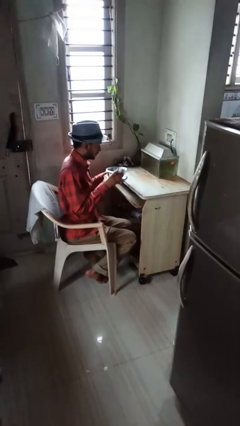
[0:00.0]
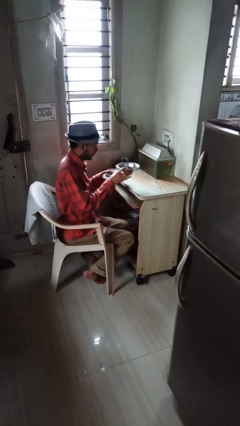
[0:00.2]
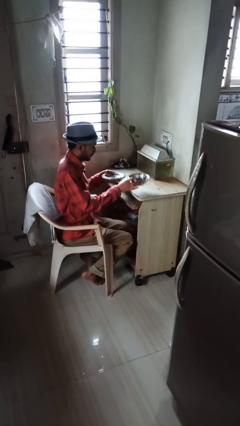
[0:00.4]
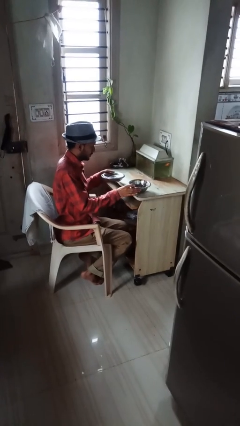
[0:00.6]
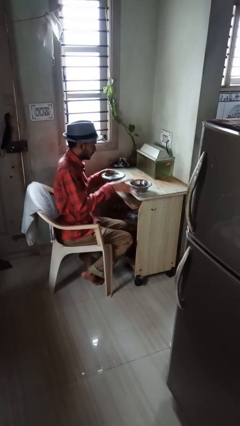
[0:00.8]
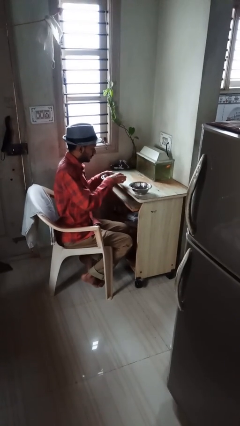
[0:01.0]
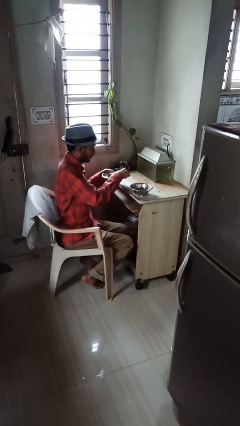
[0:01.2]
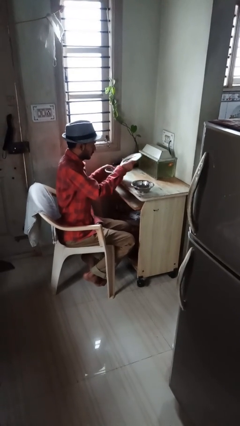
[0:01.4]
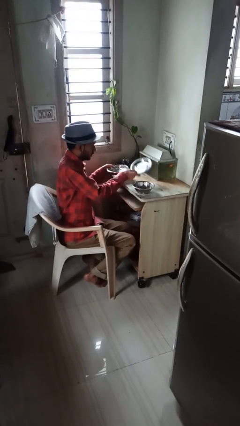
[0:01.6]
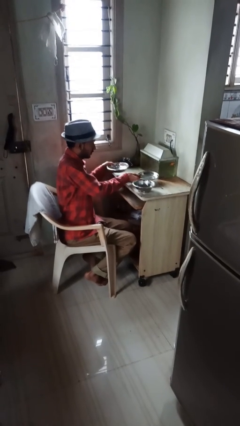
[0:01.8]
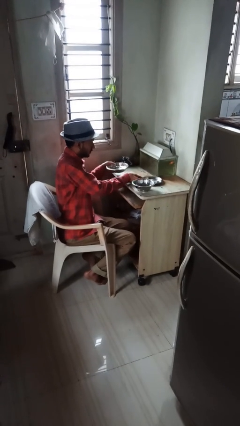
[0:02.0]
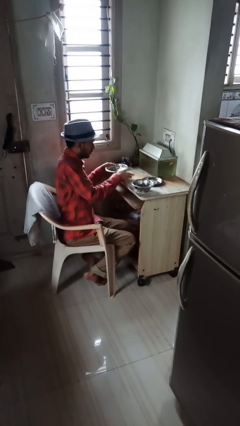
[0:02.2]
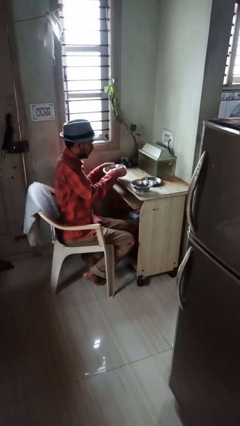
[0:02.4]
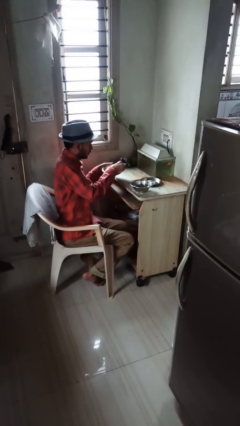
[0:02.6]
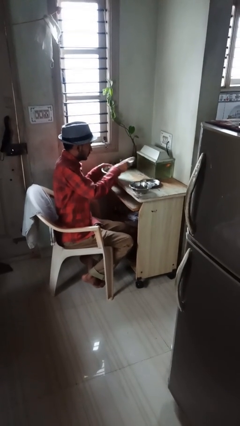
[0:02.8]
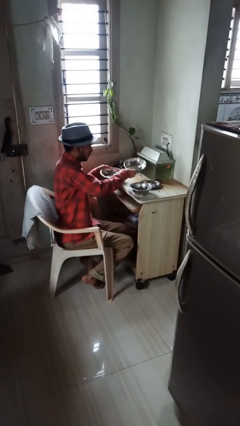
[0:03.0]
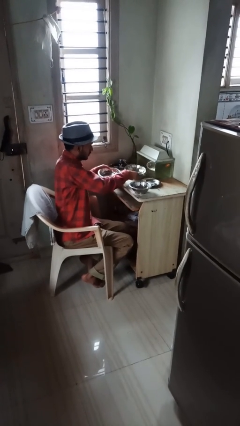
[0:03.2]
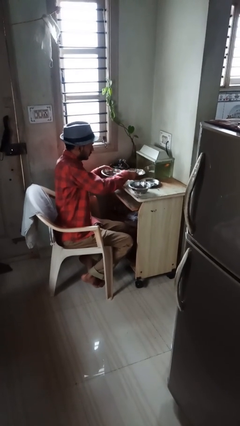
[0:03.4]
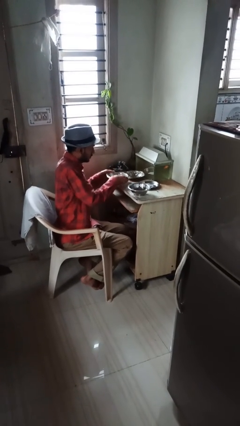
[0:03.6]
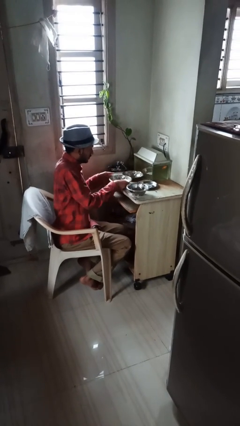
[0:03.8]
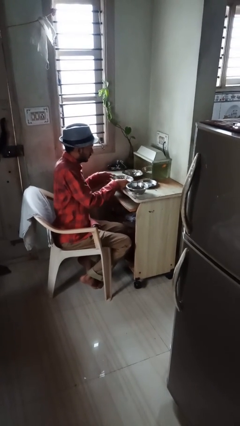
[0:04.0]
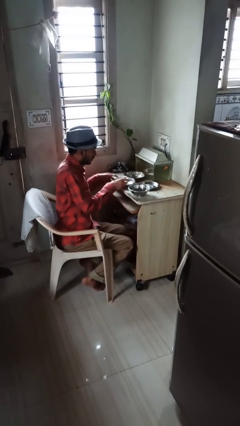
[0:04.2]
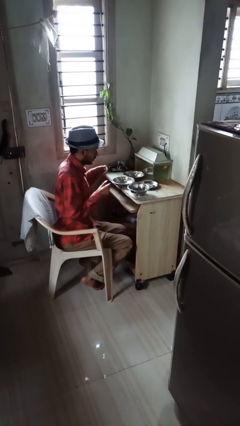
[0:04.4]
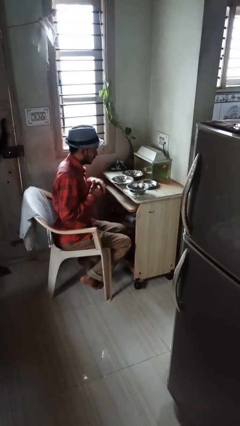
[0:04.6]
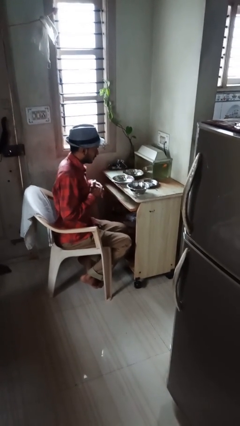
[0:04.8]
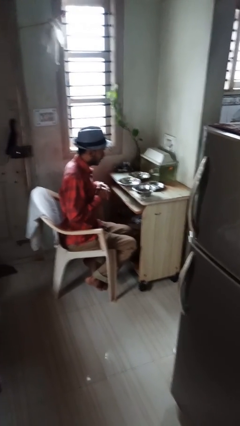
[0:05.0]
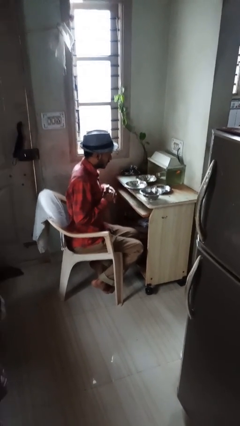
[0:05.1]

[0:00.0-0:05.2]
person sets table

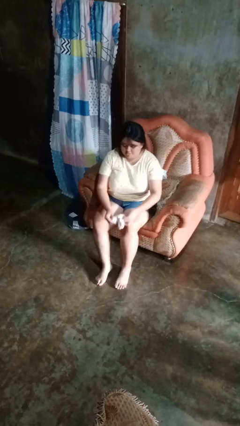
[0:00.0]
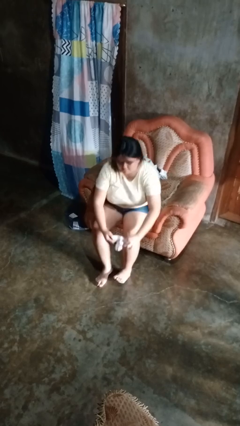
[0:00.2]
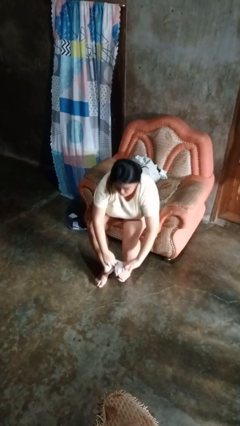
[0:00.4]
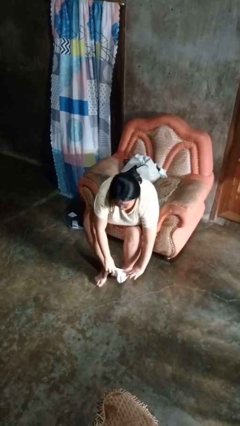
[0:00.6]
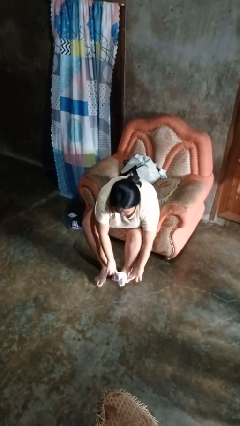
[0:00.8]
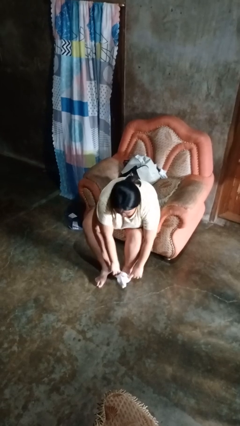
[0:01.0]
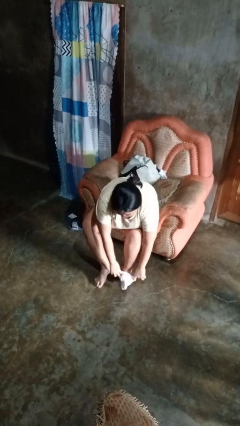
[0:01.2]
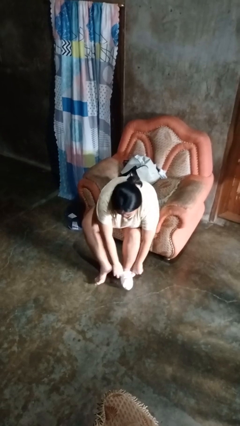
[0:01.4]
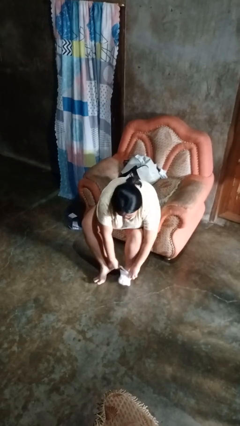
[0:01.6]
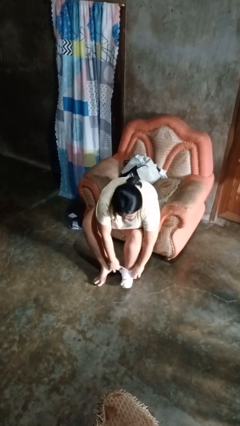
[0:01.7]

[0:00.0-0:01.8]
person puts on socks

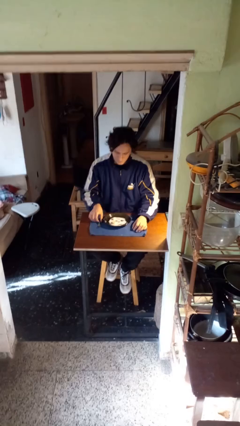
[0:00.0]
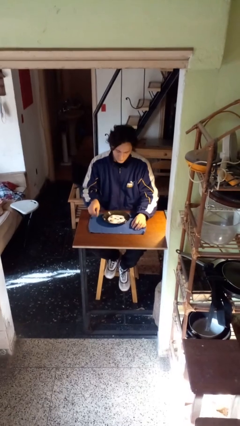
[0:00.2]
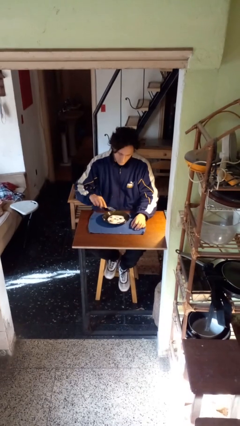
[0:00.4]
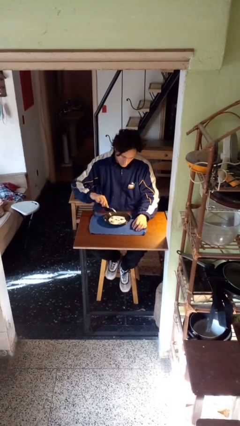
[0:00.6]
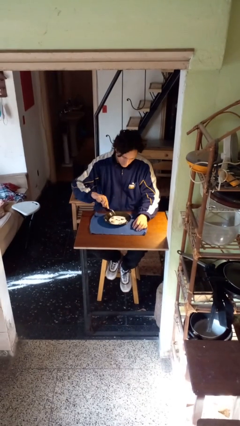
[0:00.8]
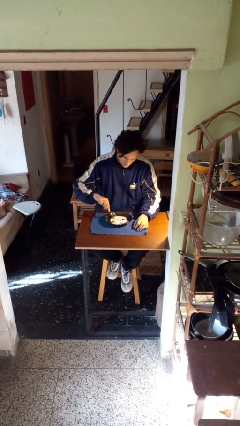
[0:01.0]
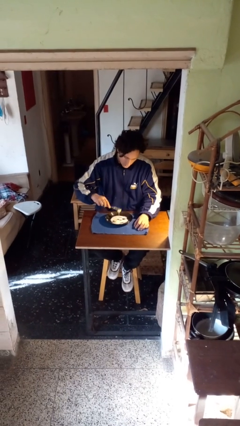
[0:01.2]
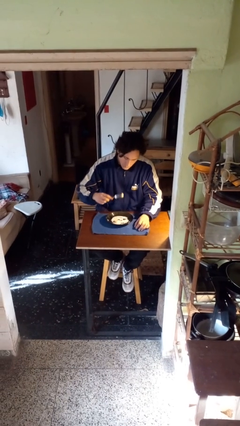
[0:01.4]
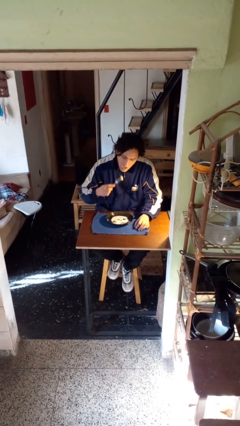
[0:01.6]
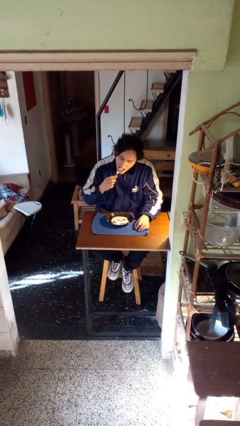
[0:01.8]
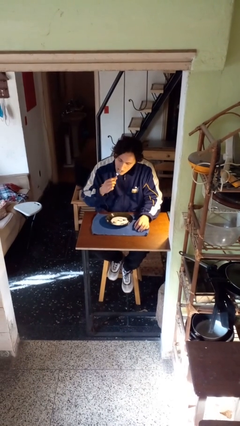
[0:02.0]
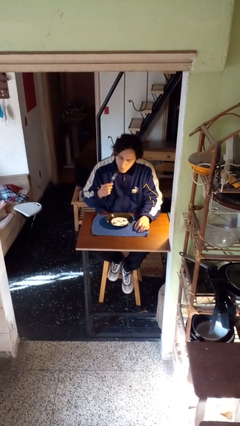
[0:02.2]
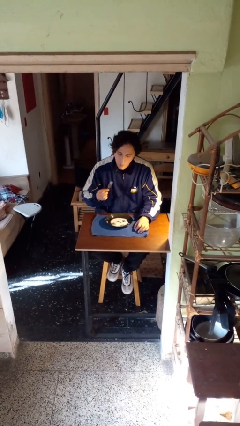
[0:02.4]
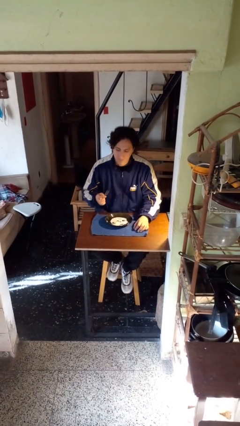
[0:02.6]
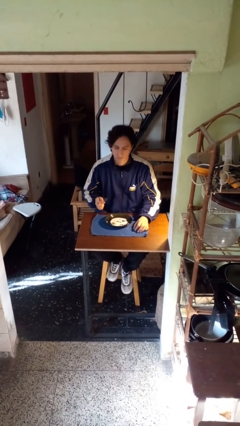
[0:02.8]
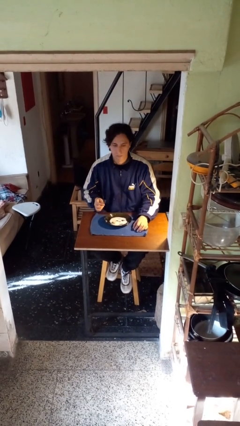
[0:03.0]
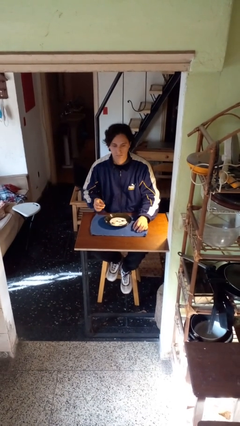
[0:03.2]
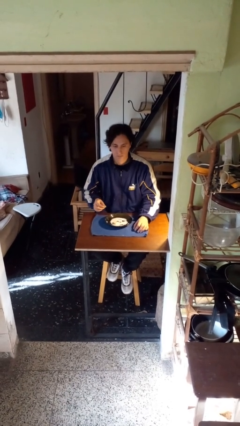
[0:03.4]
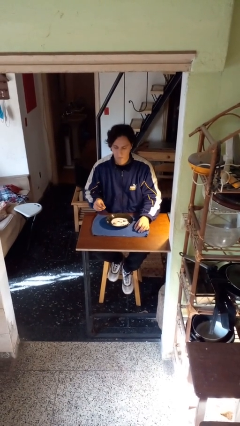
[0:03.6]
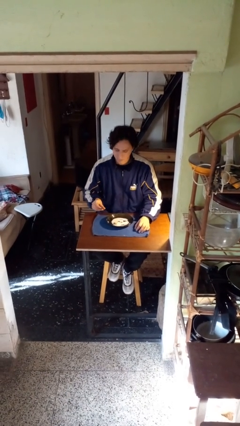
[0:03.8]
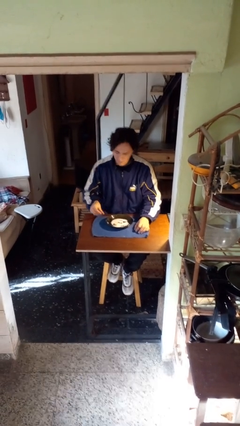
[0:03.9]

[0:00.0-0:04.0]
person eats with utensil

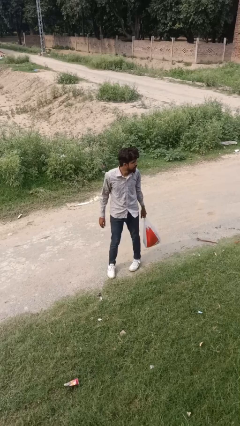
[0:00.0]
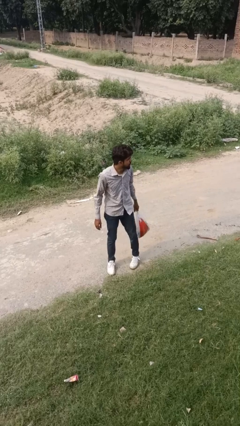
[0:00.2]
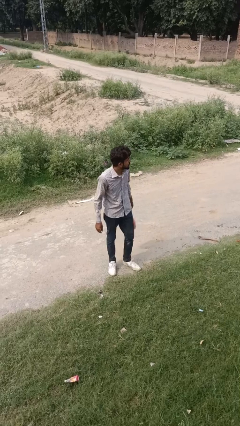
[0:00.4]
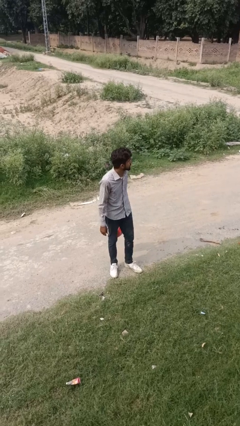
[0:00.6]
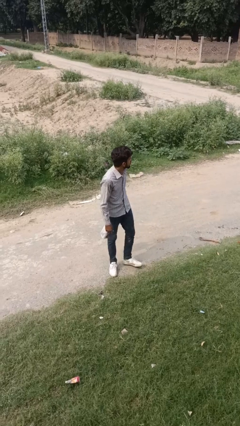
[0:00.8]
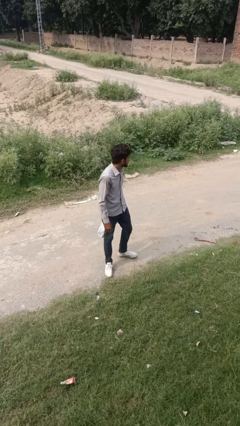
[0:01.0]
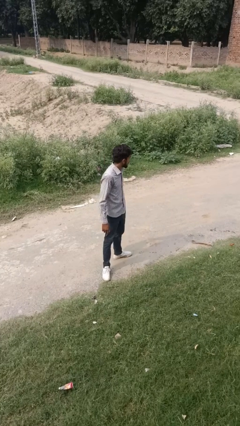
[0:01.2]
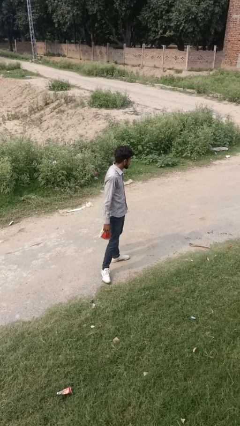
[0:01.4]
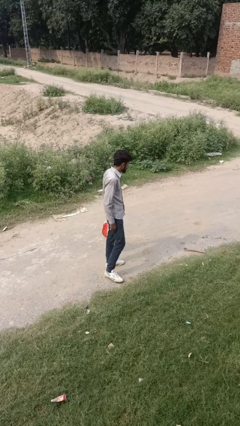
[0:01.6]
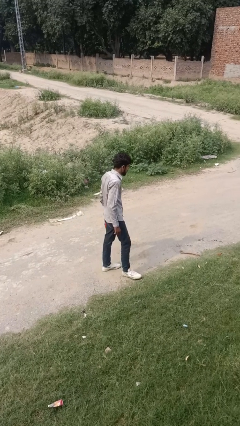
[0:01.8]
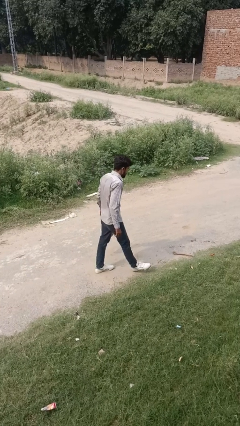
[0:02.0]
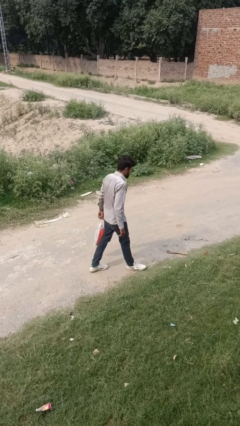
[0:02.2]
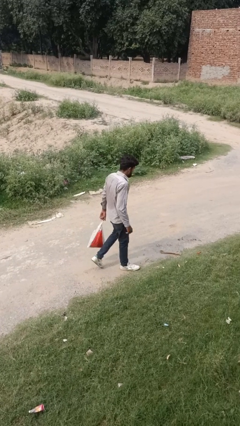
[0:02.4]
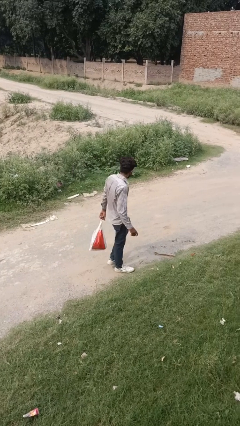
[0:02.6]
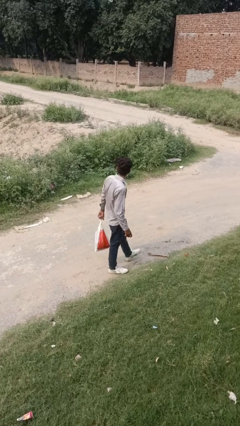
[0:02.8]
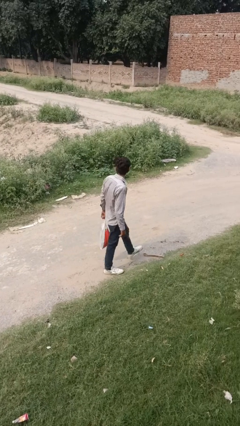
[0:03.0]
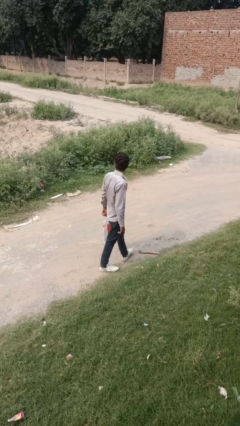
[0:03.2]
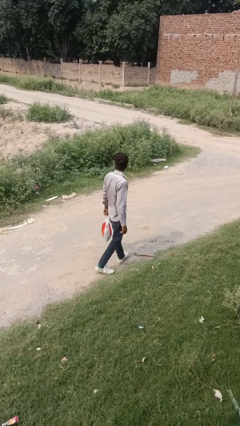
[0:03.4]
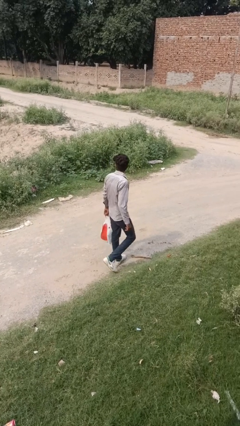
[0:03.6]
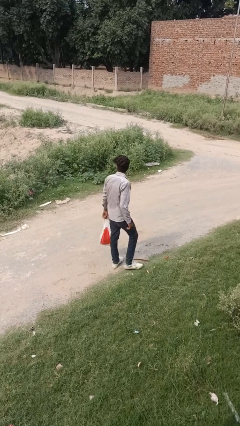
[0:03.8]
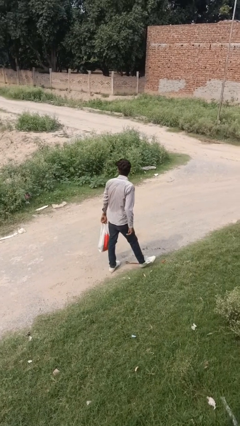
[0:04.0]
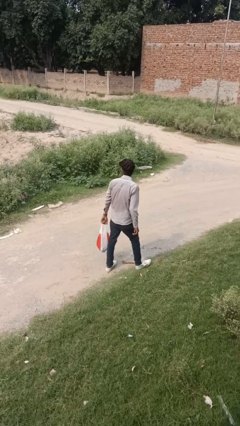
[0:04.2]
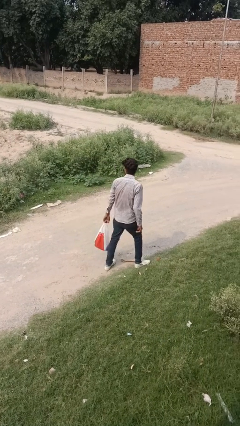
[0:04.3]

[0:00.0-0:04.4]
person carries groceries

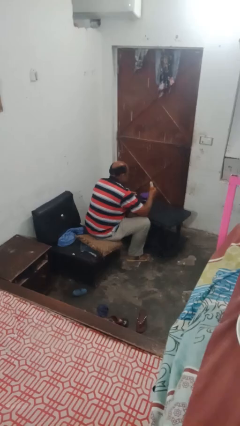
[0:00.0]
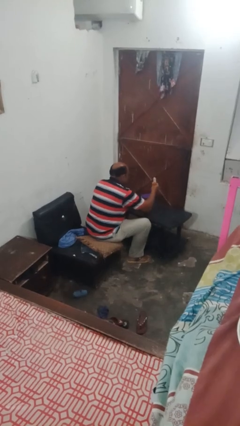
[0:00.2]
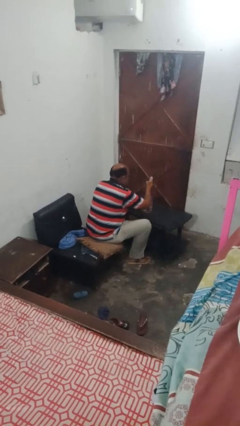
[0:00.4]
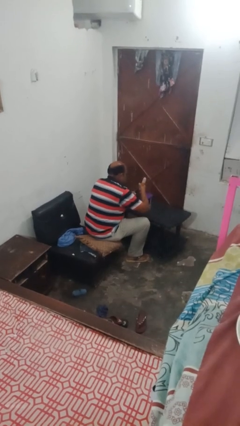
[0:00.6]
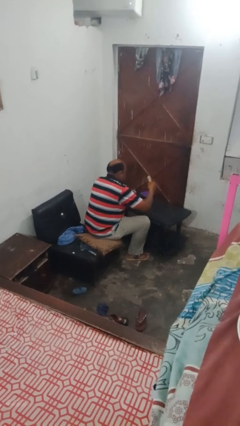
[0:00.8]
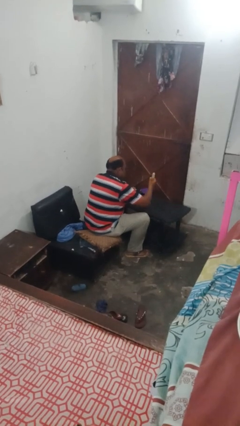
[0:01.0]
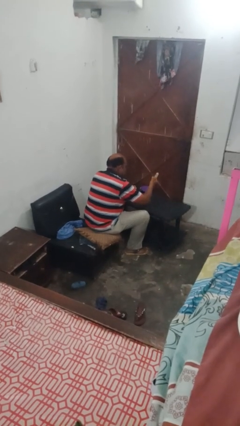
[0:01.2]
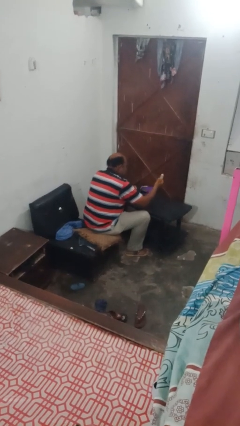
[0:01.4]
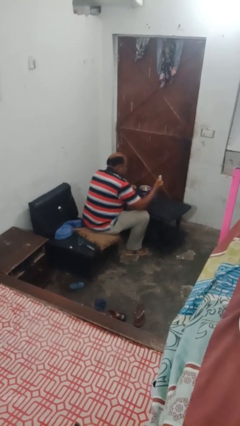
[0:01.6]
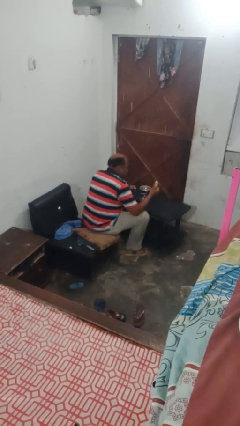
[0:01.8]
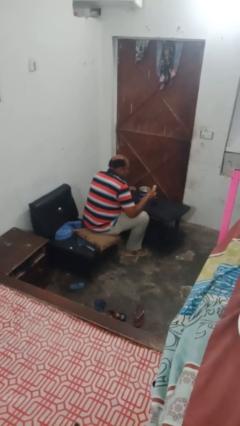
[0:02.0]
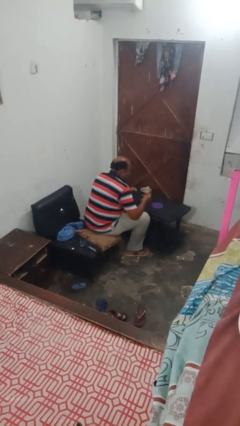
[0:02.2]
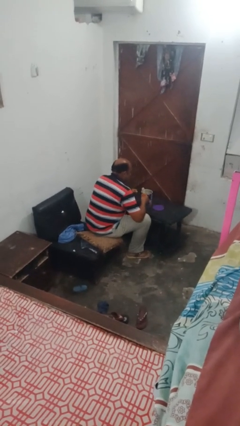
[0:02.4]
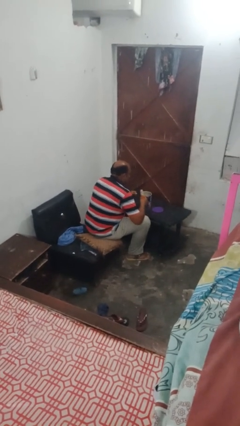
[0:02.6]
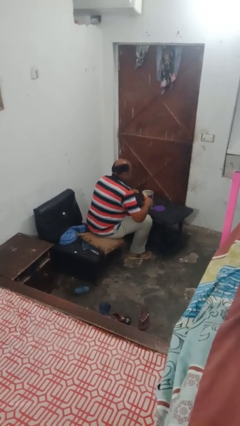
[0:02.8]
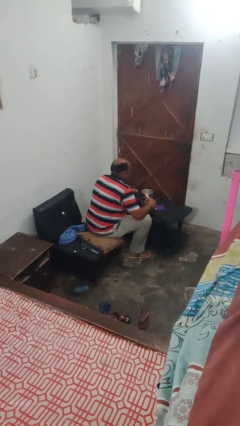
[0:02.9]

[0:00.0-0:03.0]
person opens can with can opener
